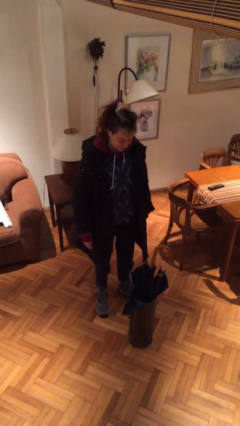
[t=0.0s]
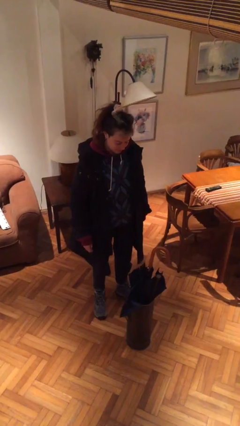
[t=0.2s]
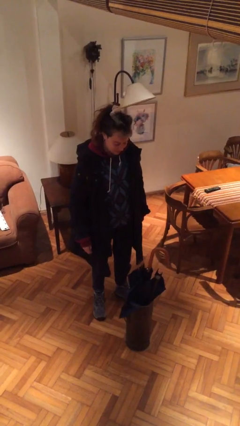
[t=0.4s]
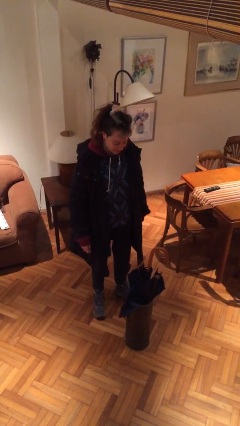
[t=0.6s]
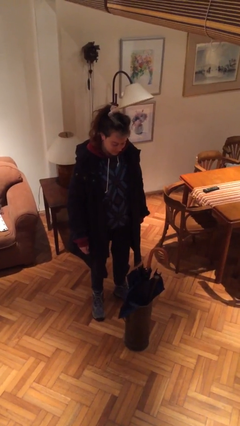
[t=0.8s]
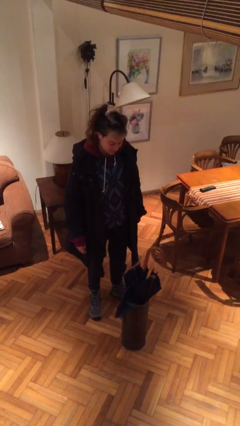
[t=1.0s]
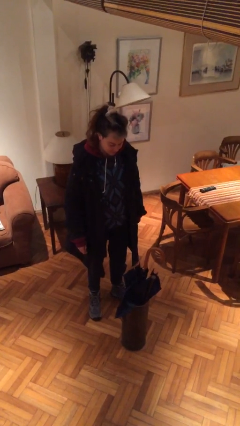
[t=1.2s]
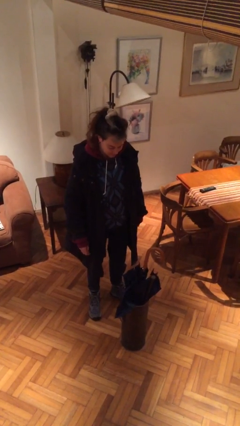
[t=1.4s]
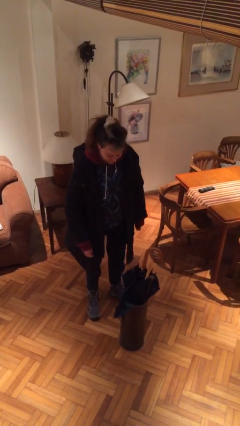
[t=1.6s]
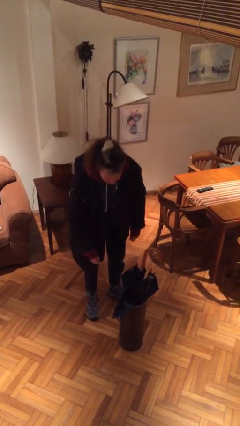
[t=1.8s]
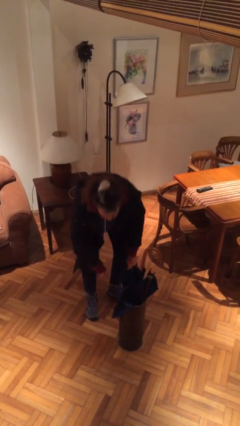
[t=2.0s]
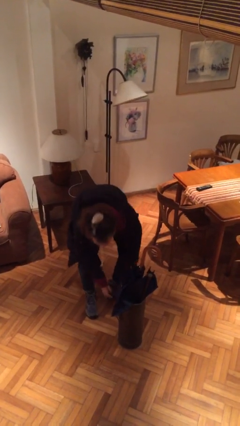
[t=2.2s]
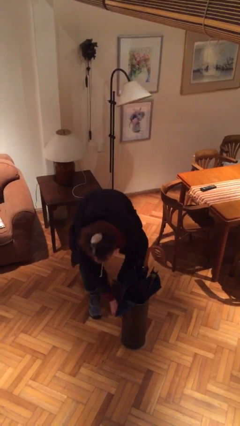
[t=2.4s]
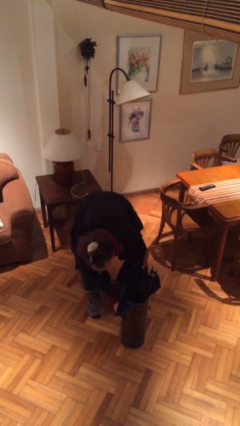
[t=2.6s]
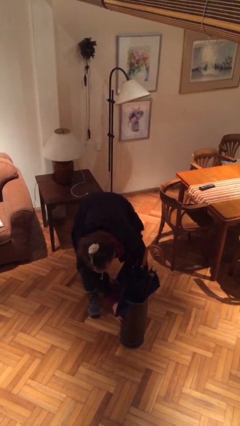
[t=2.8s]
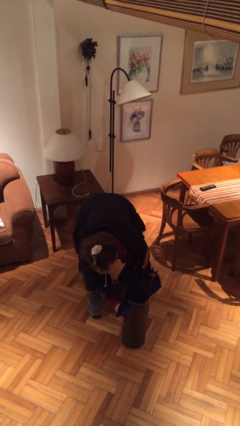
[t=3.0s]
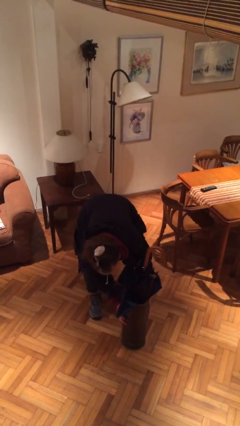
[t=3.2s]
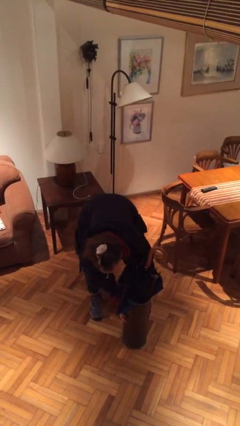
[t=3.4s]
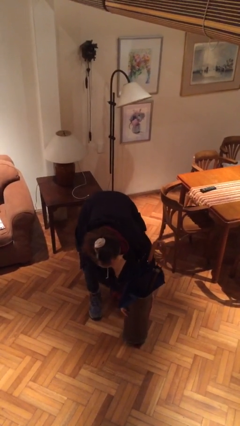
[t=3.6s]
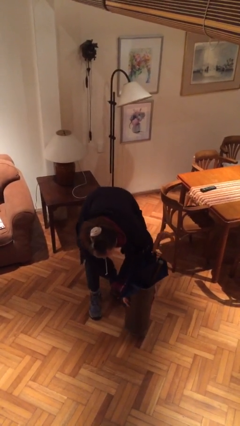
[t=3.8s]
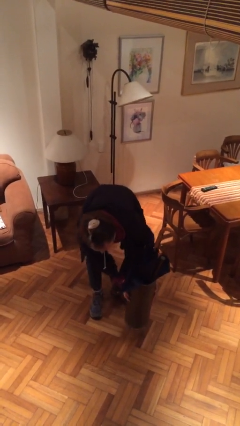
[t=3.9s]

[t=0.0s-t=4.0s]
person picks up object from floor

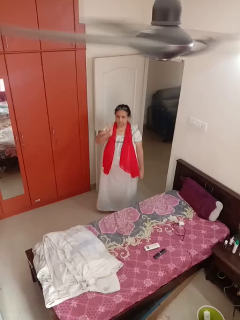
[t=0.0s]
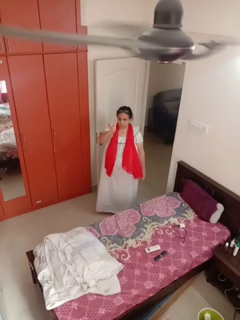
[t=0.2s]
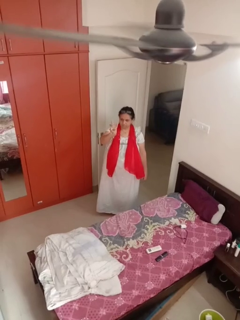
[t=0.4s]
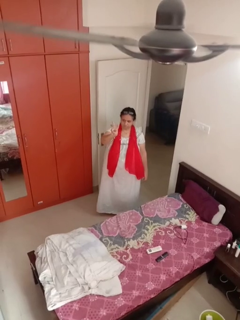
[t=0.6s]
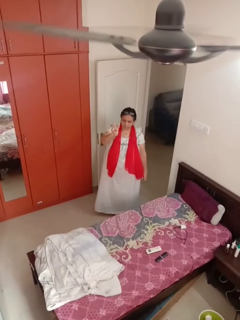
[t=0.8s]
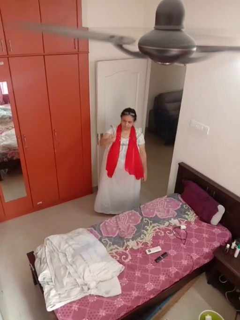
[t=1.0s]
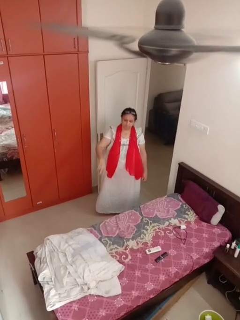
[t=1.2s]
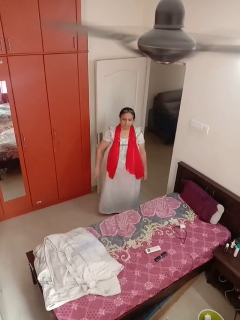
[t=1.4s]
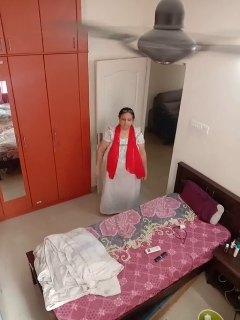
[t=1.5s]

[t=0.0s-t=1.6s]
person gestures peace

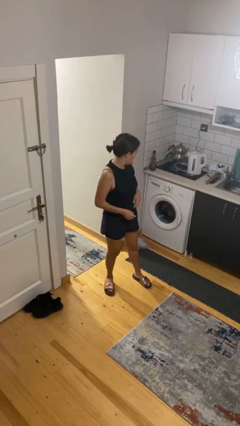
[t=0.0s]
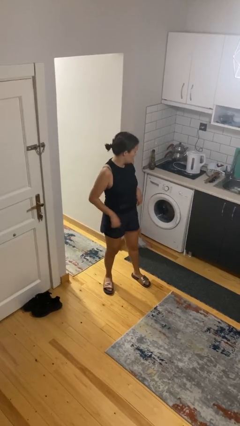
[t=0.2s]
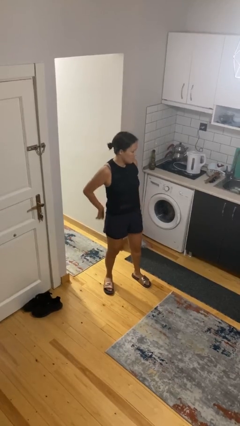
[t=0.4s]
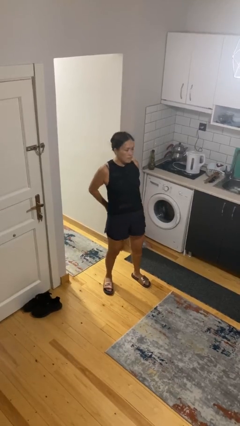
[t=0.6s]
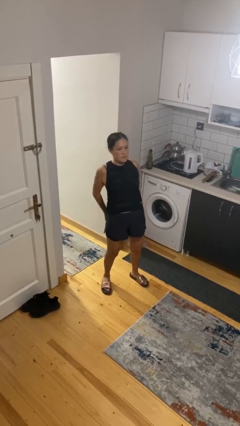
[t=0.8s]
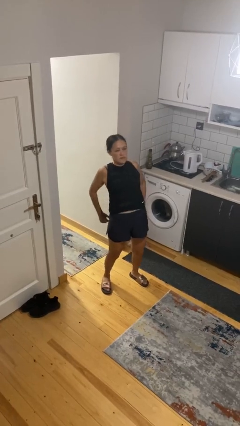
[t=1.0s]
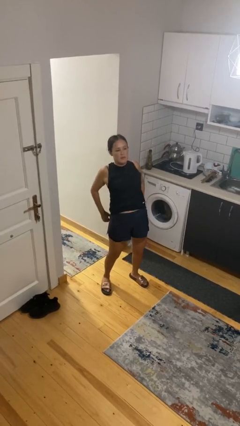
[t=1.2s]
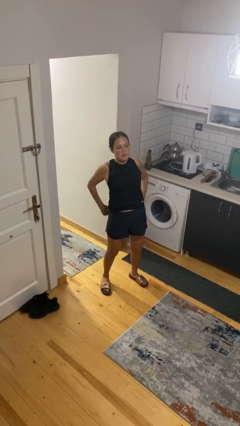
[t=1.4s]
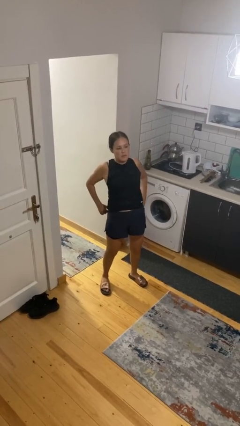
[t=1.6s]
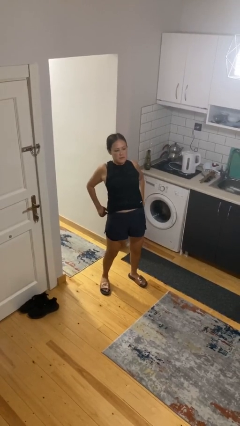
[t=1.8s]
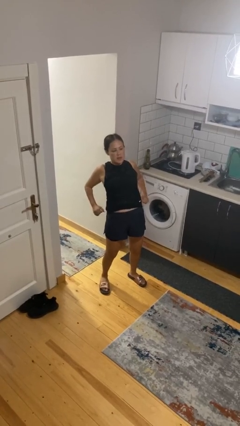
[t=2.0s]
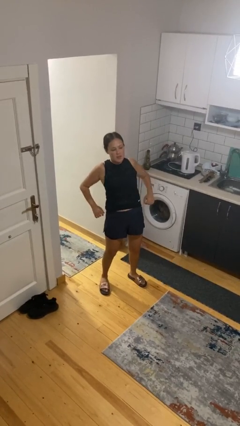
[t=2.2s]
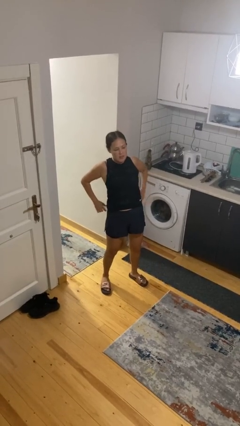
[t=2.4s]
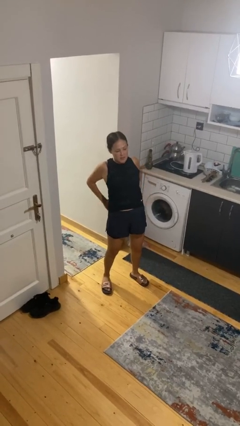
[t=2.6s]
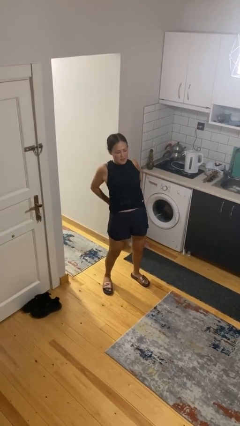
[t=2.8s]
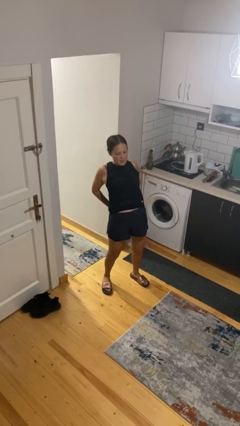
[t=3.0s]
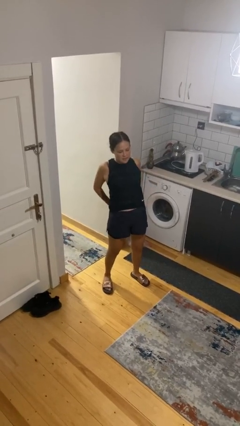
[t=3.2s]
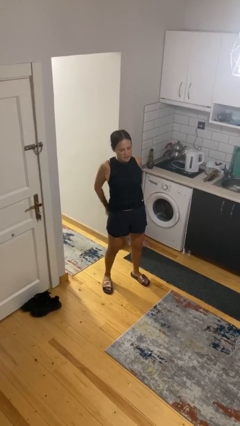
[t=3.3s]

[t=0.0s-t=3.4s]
person stretches back

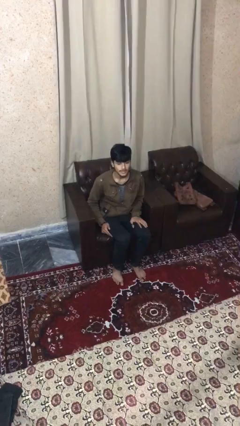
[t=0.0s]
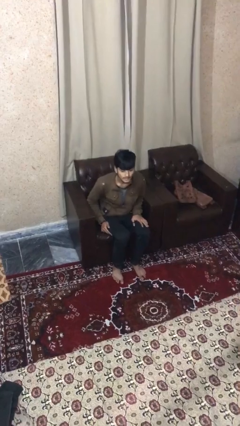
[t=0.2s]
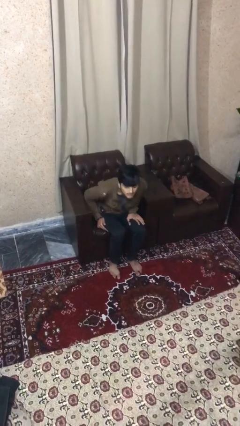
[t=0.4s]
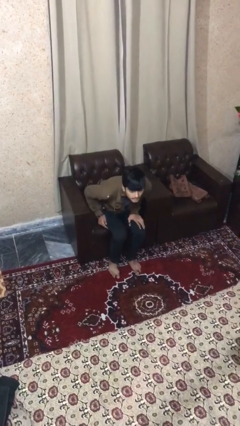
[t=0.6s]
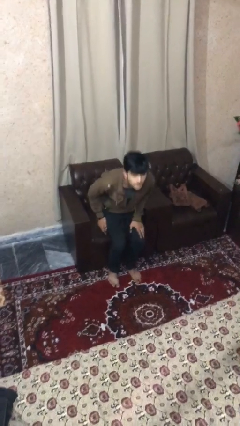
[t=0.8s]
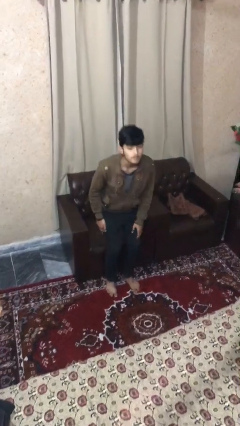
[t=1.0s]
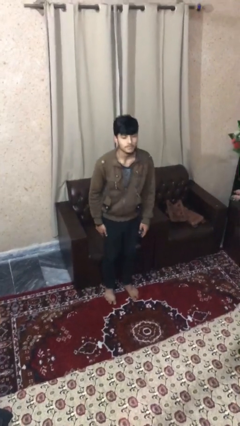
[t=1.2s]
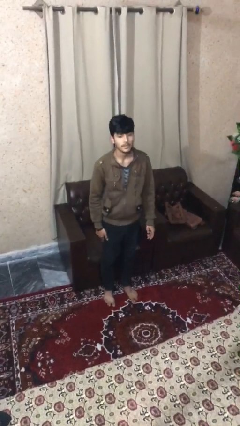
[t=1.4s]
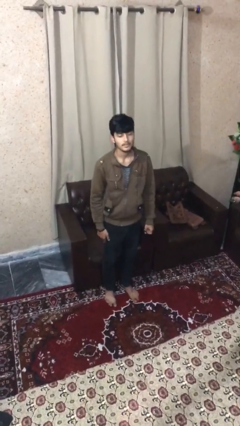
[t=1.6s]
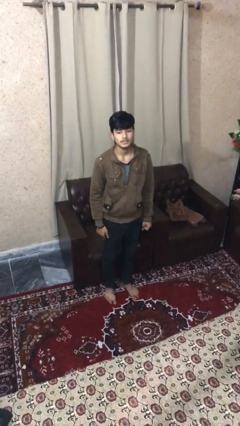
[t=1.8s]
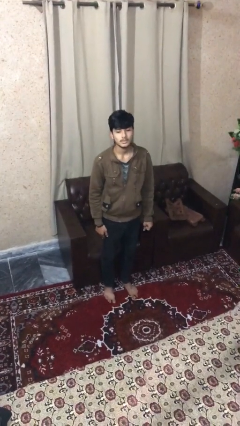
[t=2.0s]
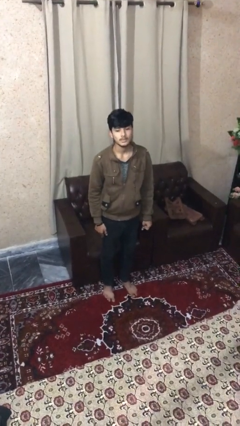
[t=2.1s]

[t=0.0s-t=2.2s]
person stands up

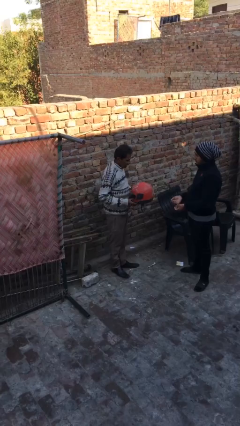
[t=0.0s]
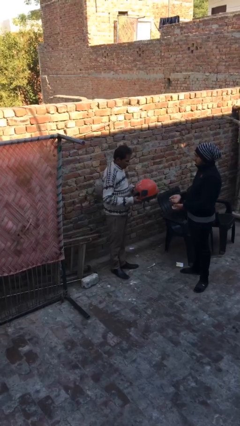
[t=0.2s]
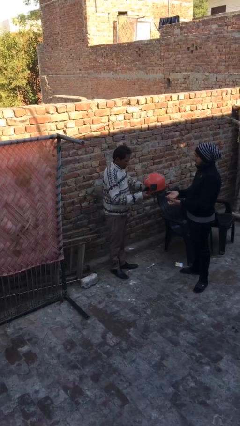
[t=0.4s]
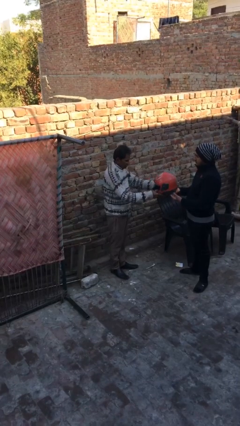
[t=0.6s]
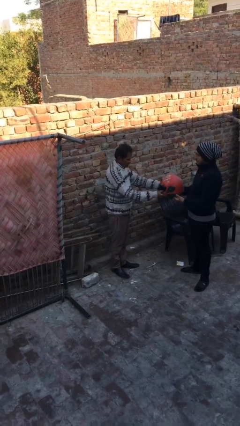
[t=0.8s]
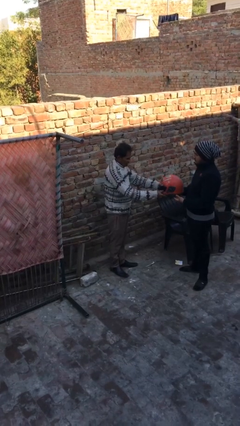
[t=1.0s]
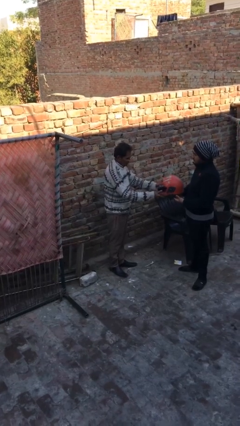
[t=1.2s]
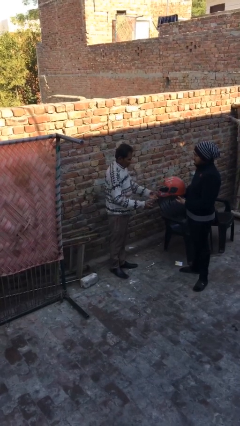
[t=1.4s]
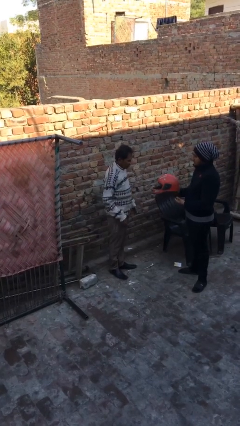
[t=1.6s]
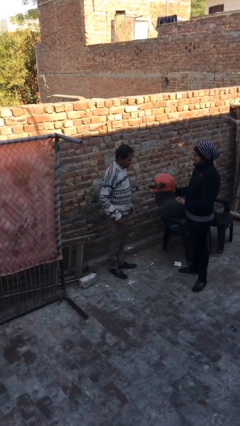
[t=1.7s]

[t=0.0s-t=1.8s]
person transfers object to person

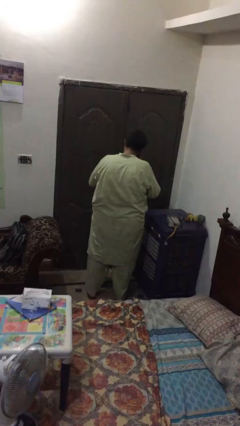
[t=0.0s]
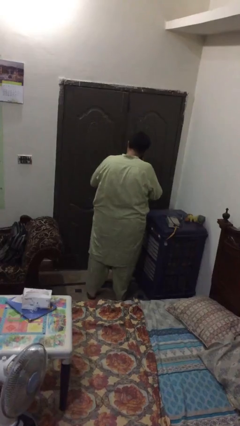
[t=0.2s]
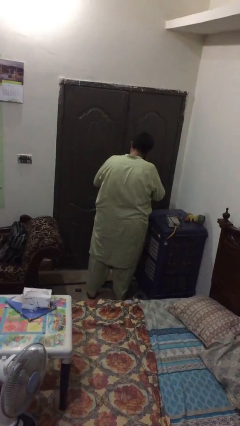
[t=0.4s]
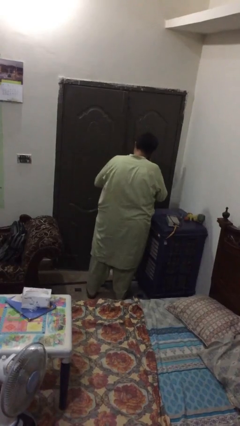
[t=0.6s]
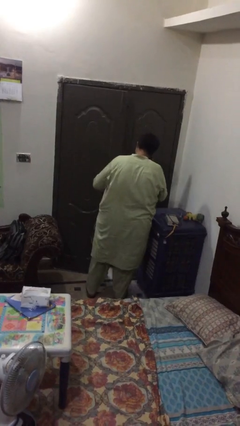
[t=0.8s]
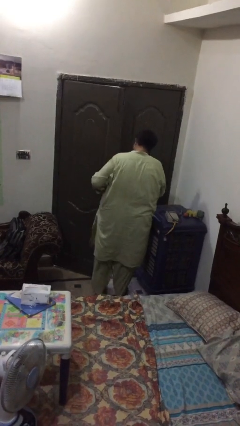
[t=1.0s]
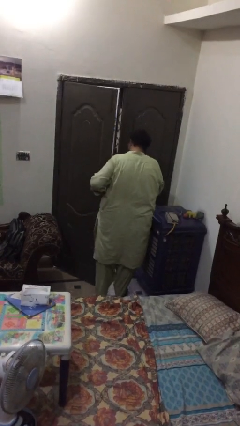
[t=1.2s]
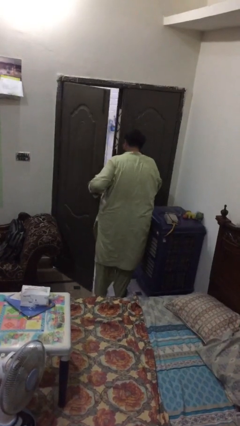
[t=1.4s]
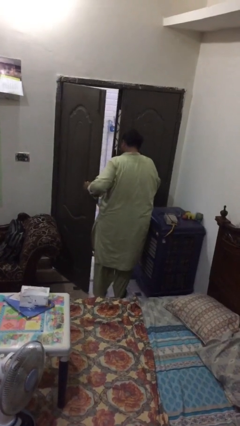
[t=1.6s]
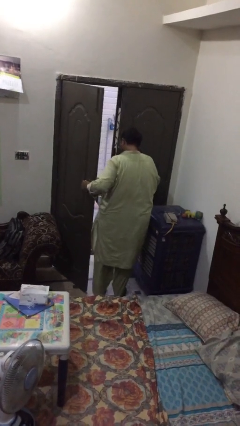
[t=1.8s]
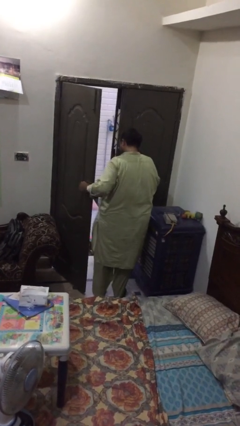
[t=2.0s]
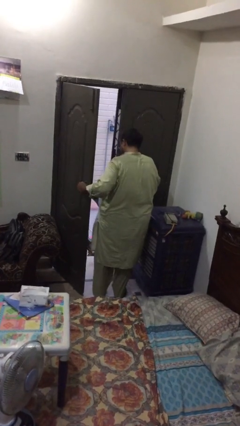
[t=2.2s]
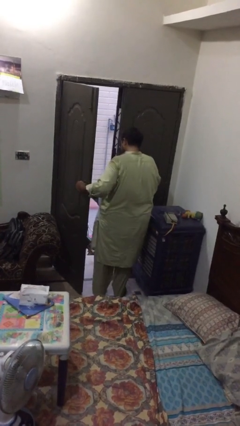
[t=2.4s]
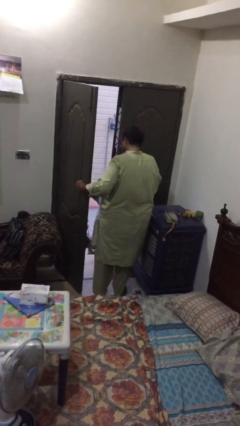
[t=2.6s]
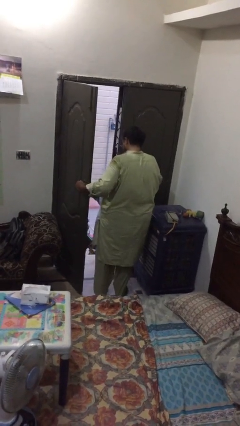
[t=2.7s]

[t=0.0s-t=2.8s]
person opens facility door

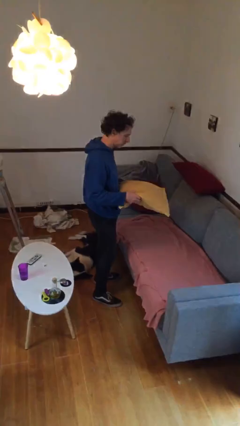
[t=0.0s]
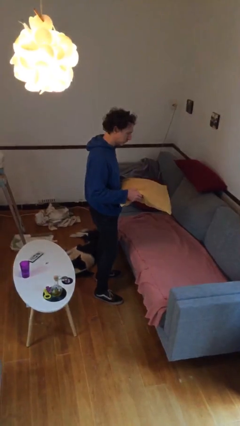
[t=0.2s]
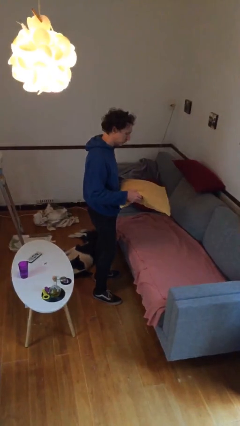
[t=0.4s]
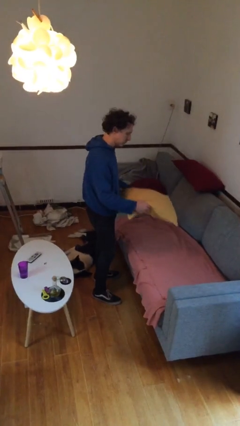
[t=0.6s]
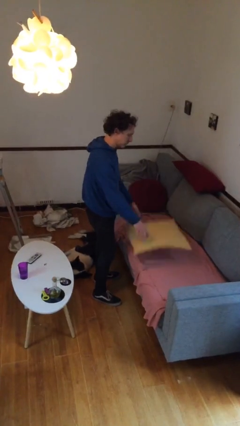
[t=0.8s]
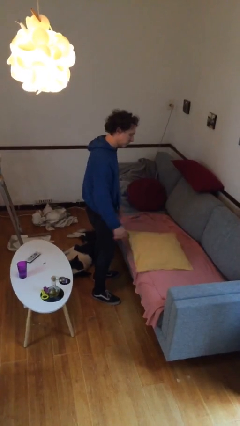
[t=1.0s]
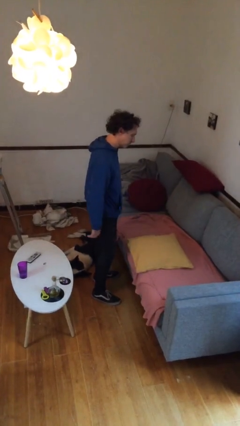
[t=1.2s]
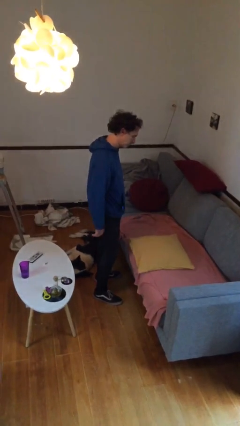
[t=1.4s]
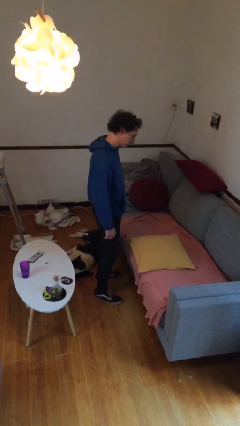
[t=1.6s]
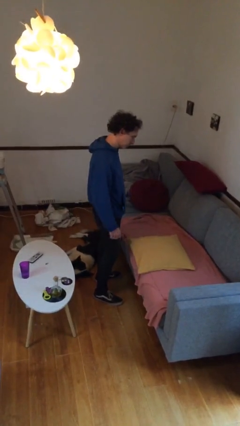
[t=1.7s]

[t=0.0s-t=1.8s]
person puts down object on couch
